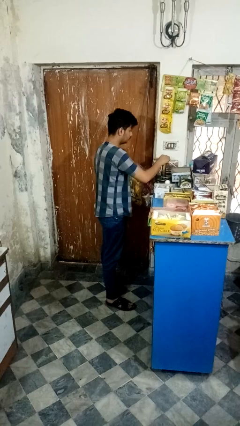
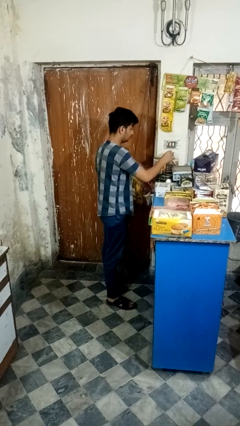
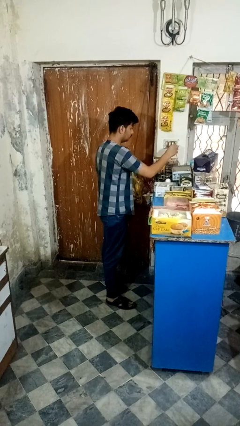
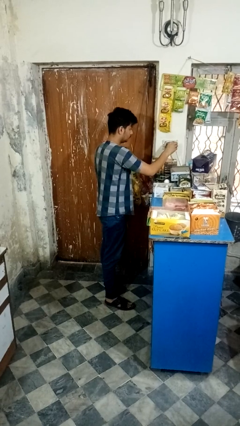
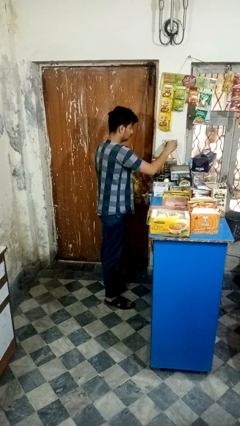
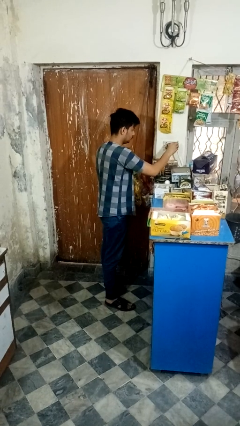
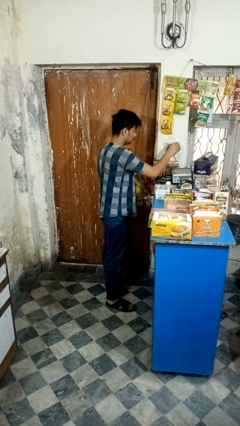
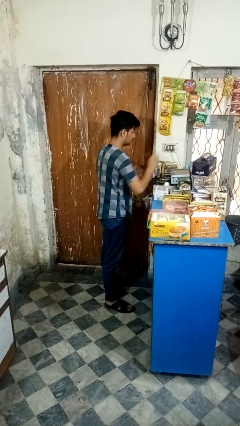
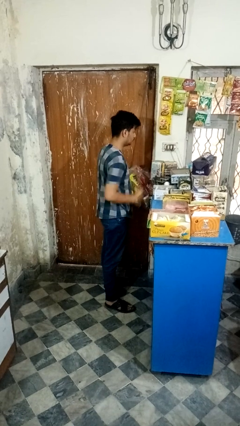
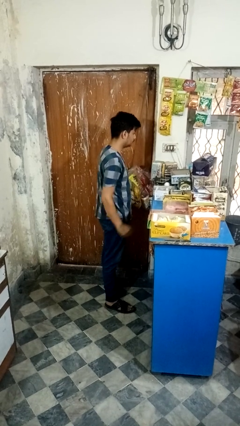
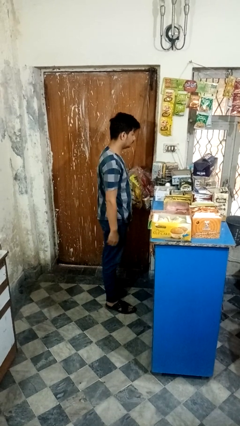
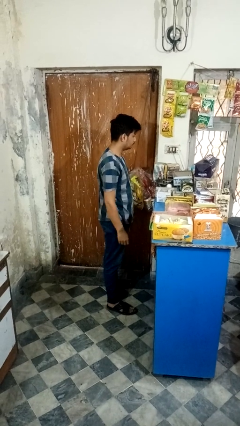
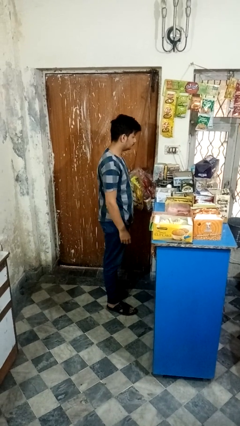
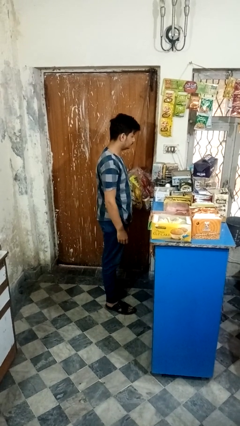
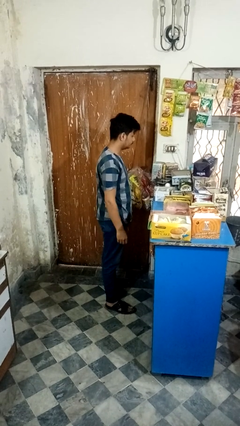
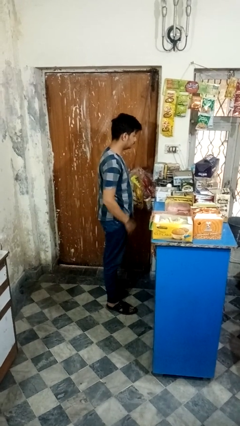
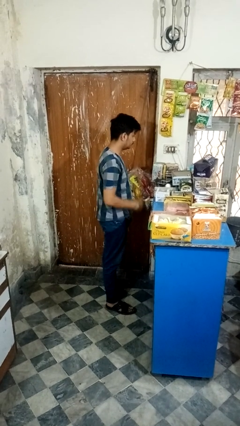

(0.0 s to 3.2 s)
person plugs into electrical socket

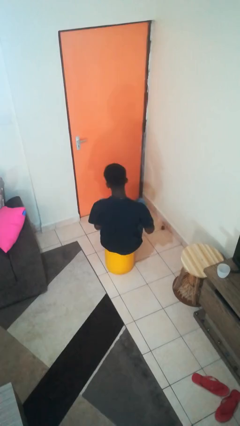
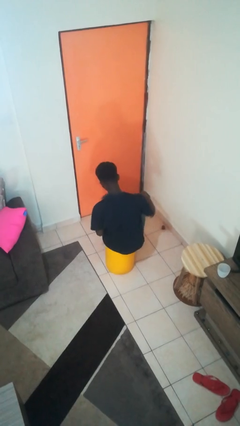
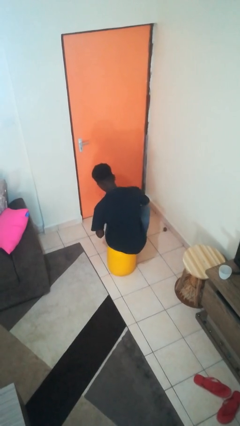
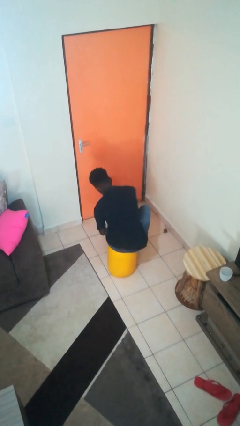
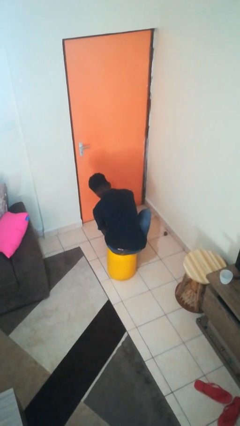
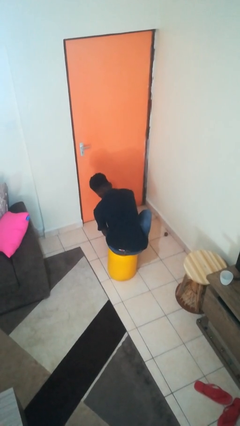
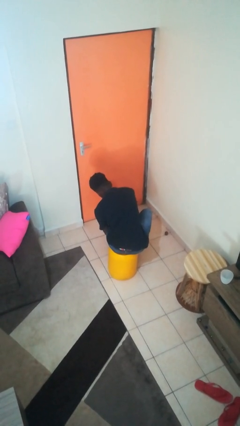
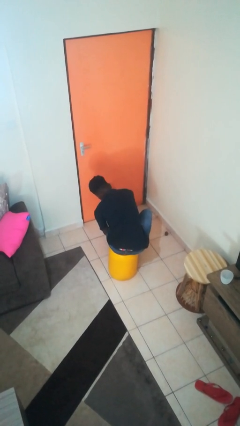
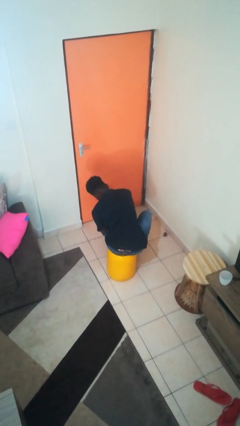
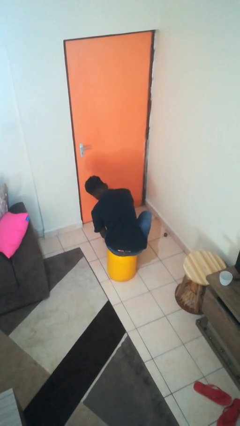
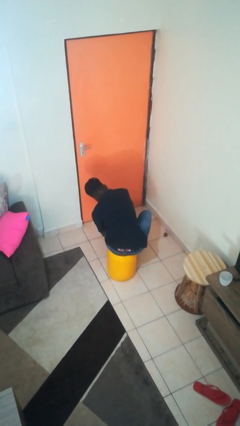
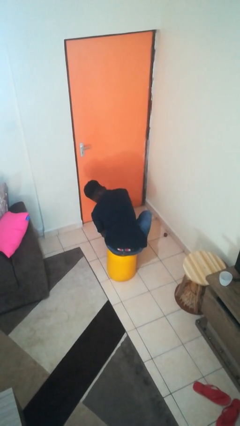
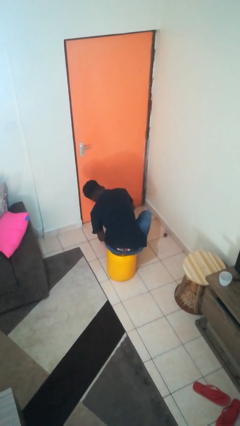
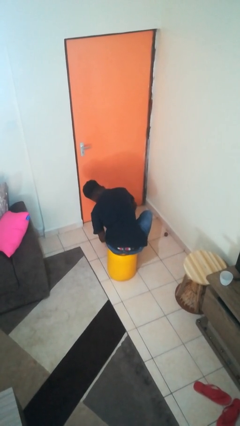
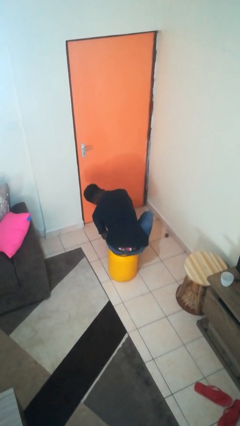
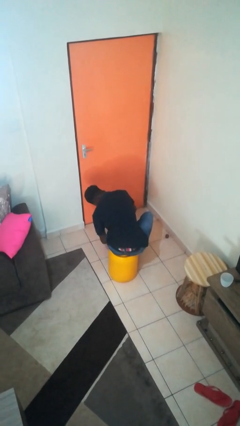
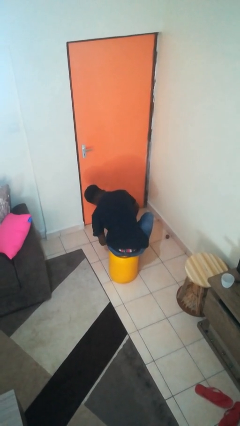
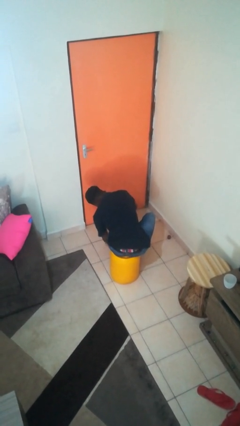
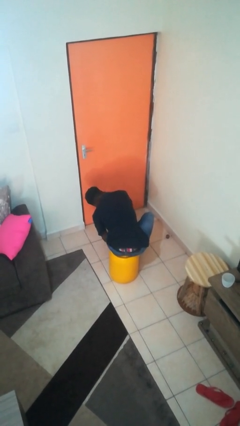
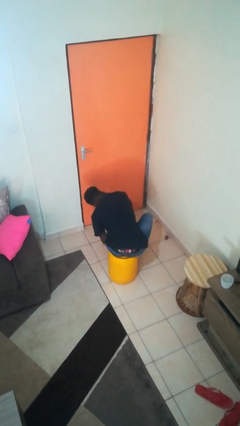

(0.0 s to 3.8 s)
person rubs foot

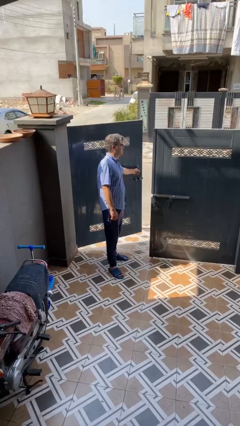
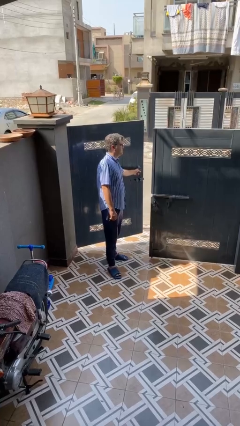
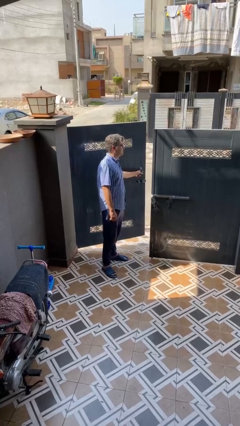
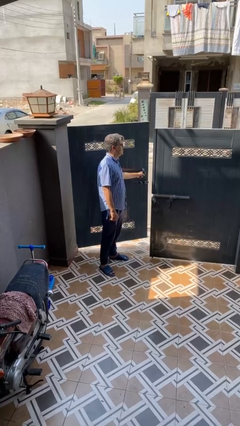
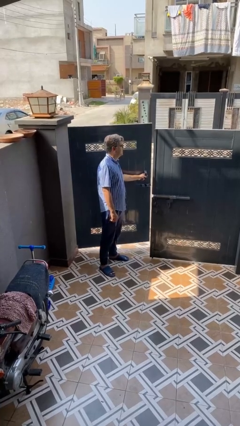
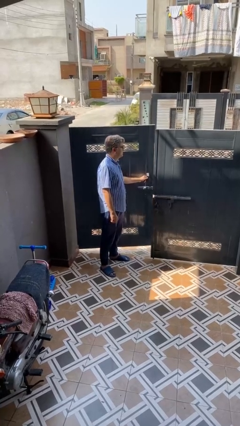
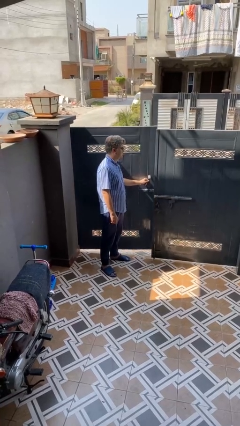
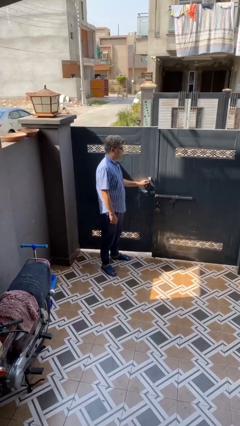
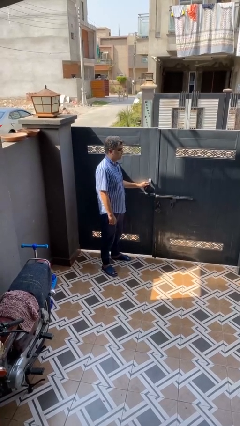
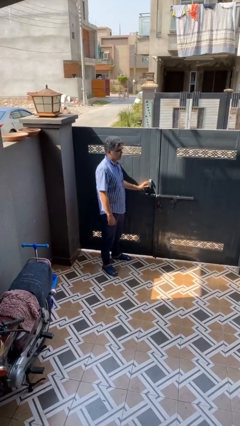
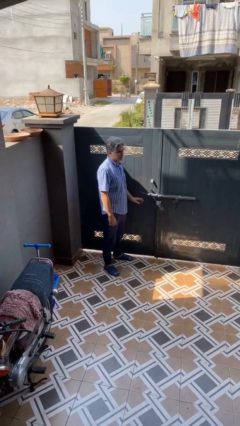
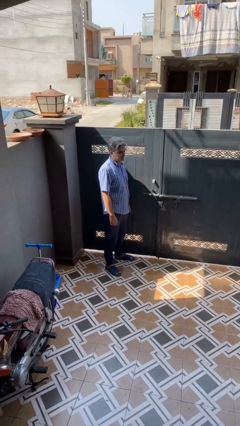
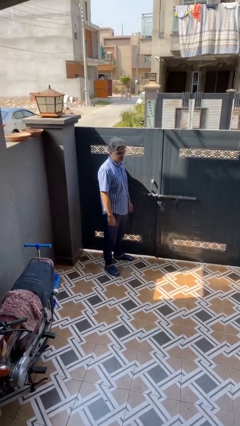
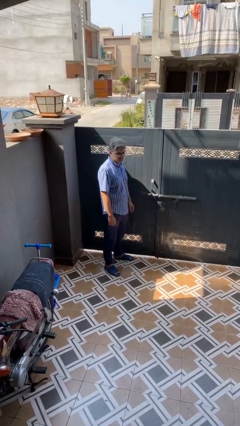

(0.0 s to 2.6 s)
person closes gate

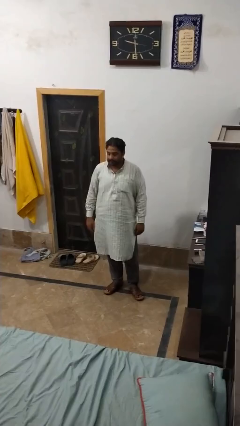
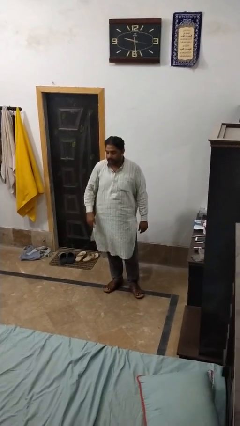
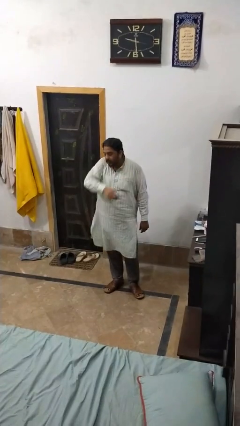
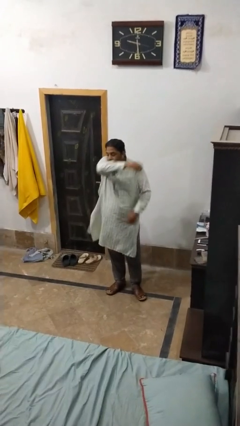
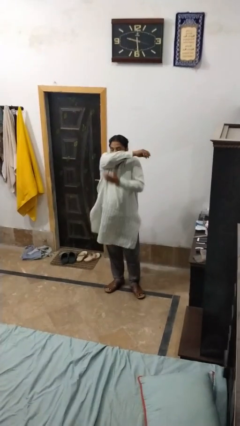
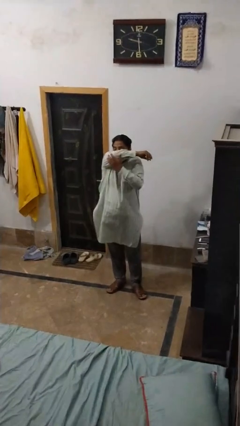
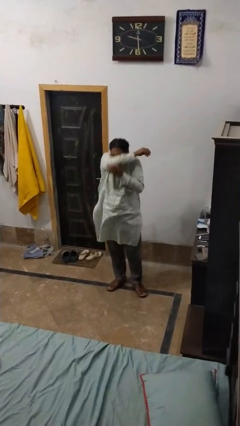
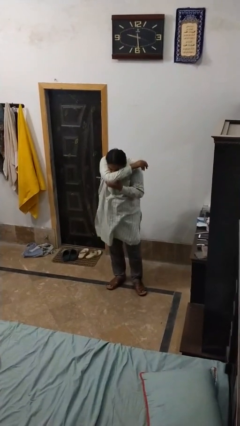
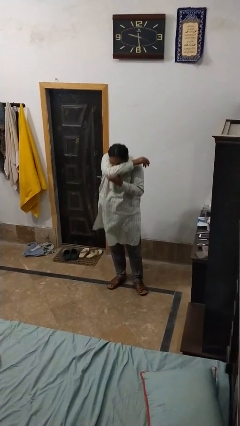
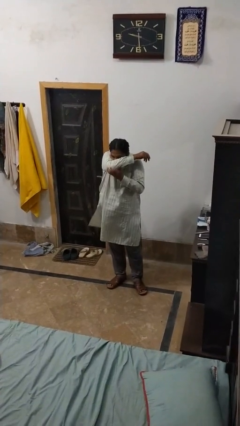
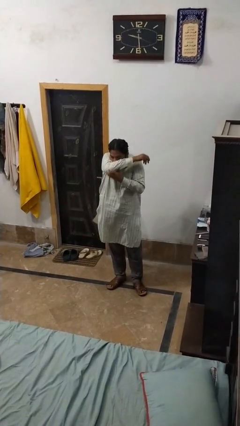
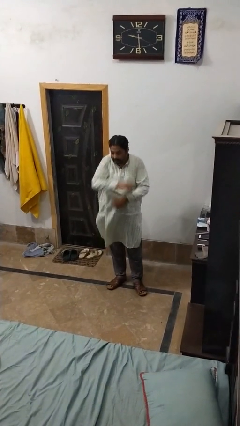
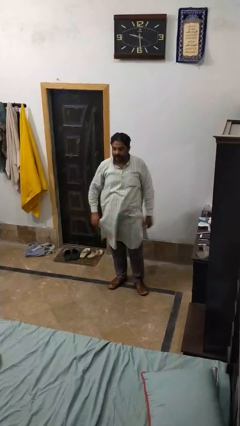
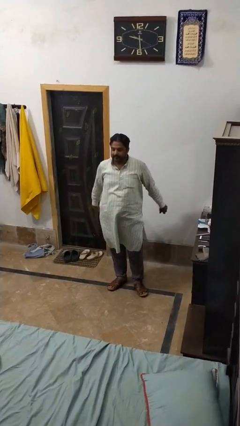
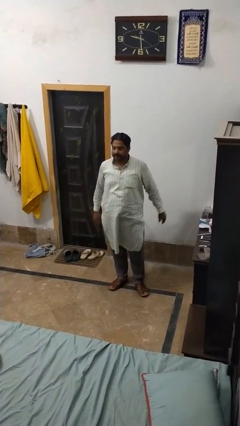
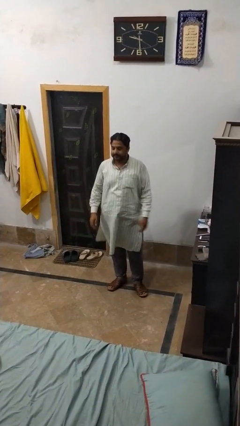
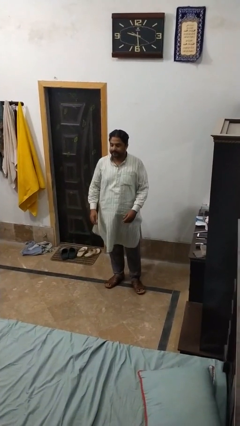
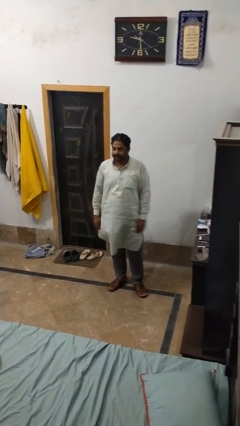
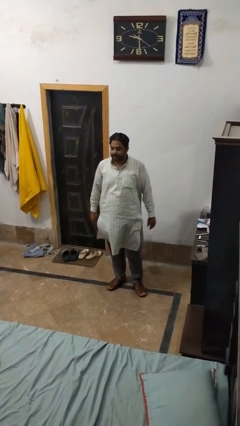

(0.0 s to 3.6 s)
person sneezes into arm

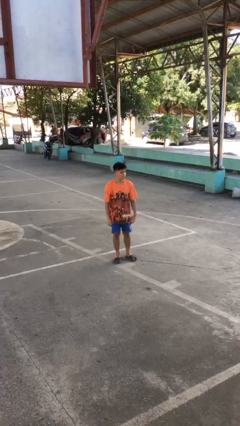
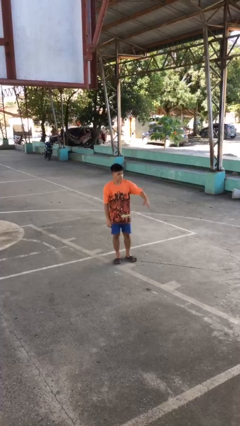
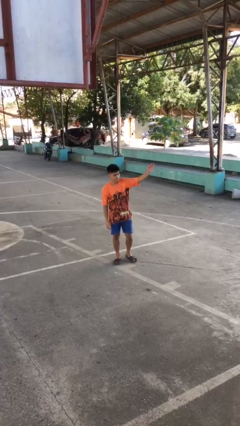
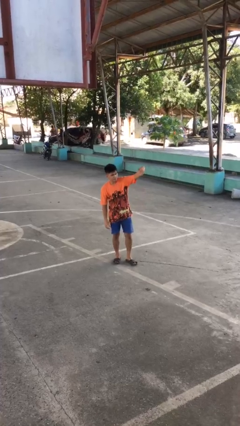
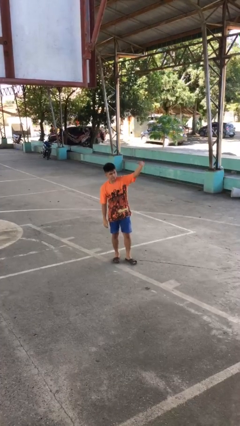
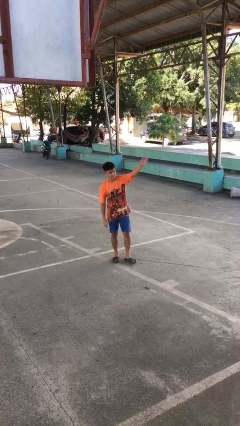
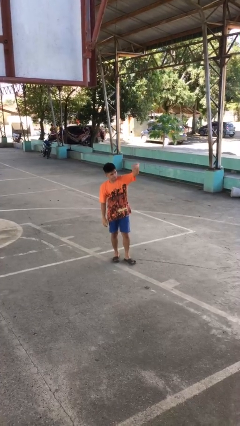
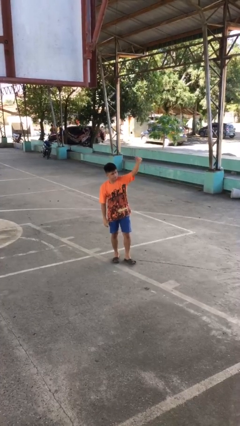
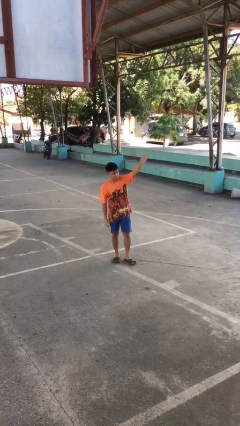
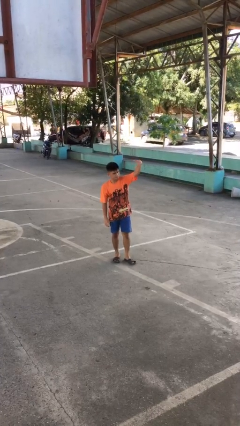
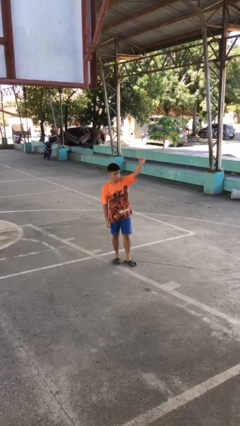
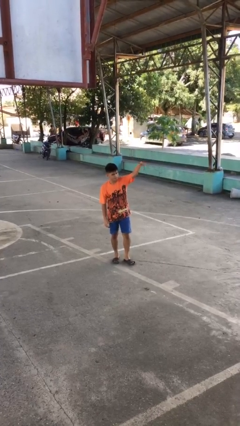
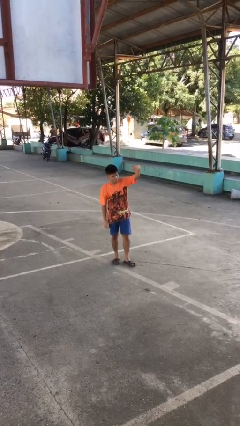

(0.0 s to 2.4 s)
person gestures come here

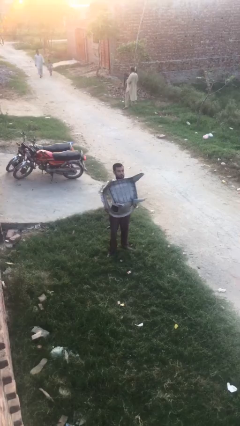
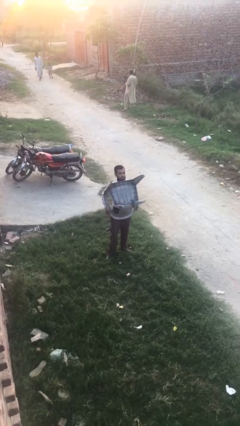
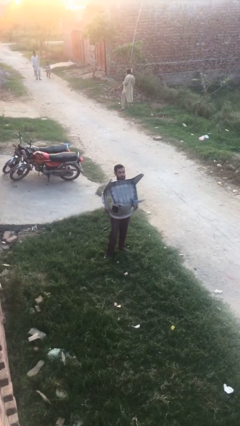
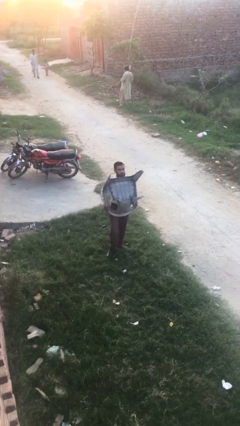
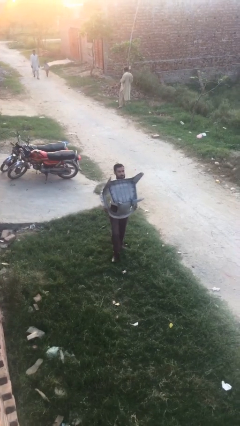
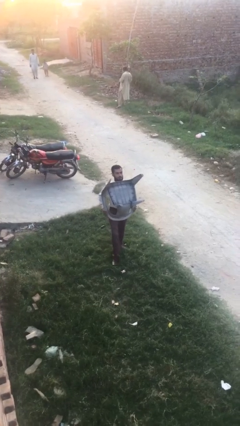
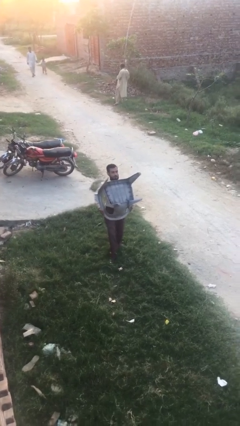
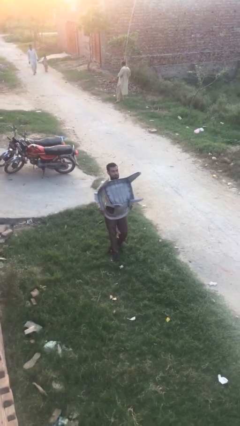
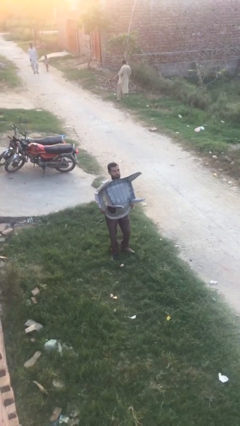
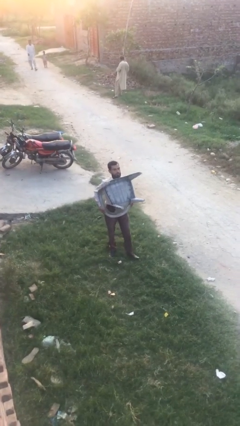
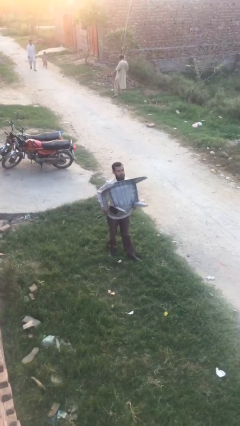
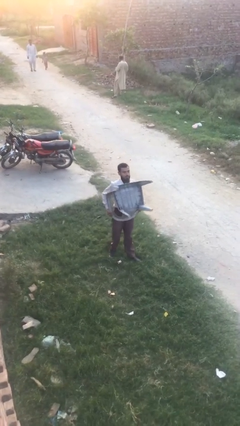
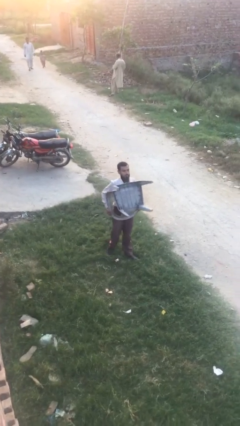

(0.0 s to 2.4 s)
person carries heavy object
